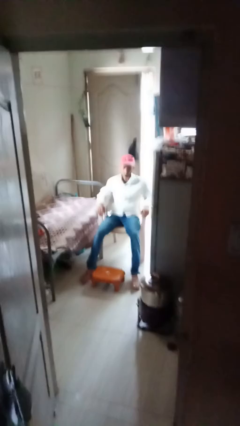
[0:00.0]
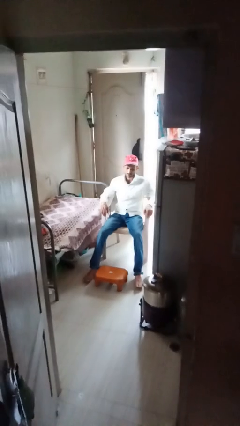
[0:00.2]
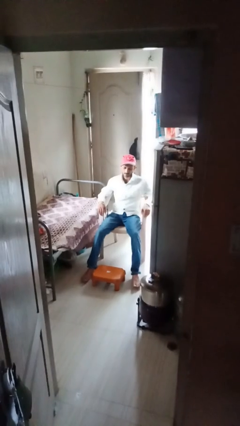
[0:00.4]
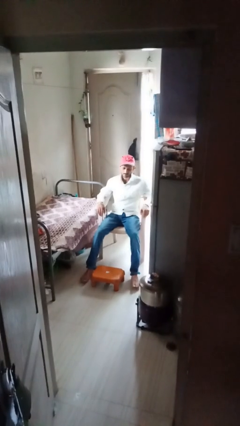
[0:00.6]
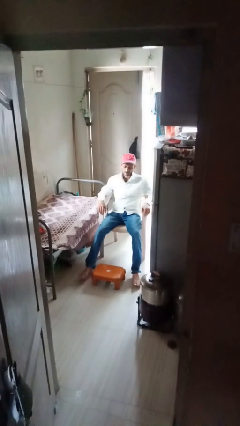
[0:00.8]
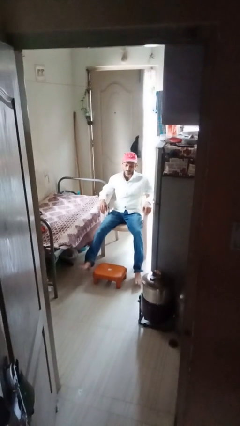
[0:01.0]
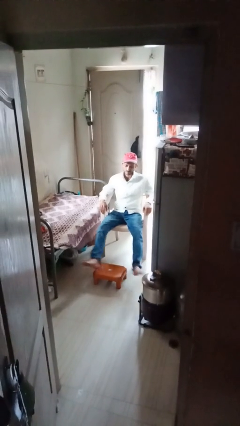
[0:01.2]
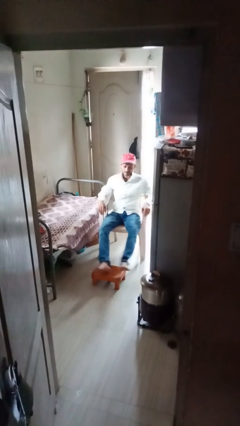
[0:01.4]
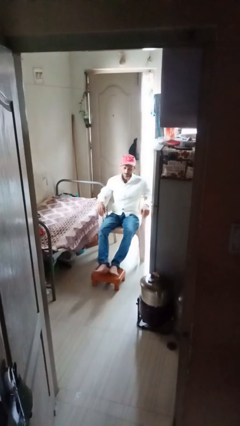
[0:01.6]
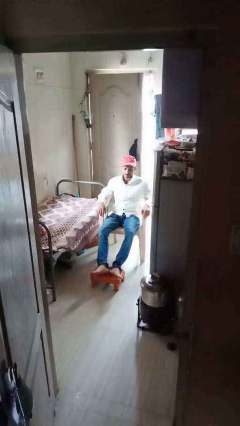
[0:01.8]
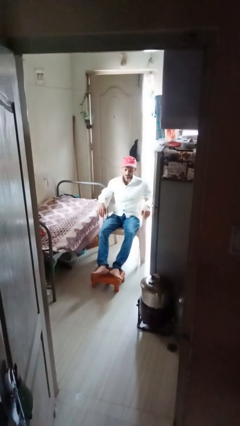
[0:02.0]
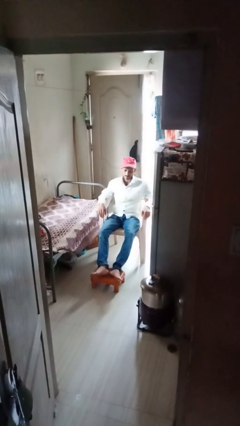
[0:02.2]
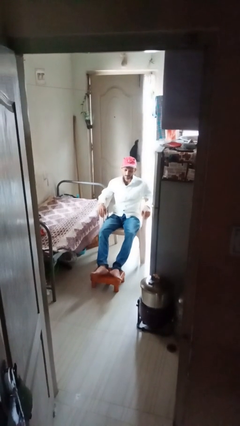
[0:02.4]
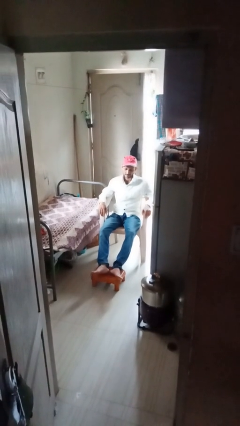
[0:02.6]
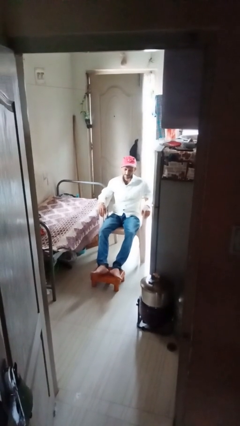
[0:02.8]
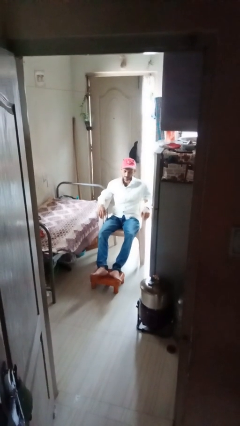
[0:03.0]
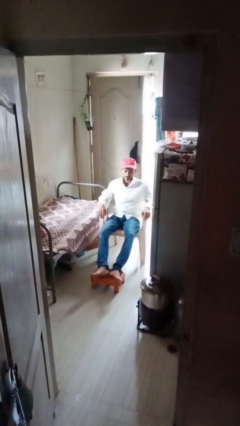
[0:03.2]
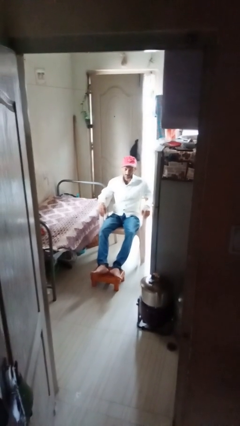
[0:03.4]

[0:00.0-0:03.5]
person puts feet up

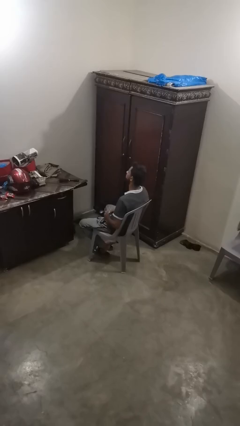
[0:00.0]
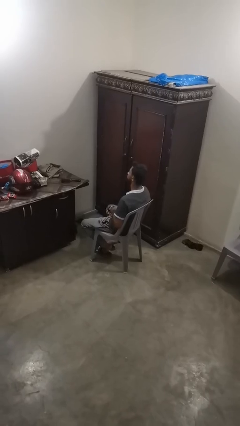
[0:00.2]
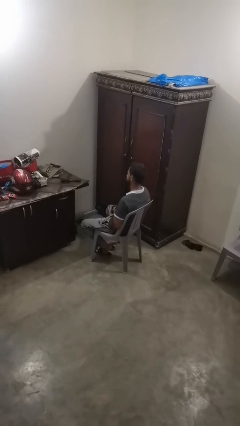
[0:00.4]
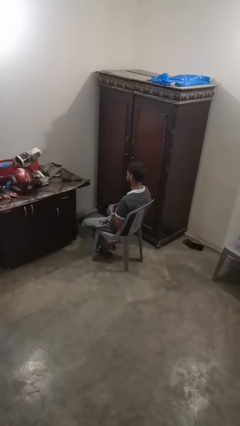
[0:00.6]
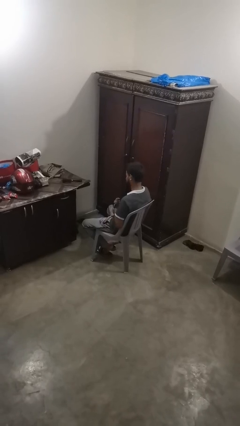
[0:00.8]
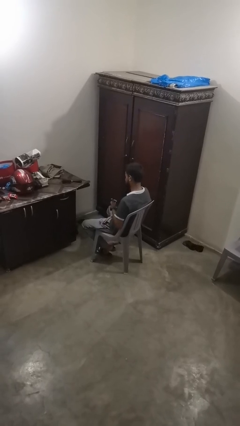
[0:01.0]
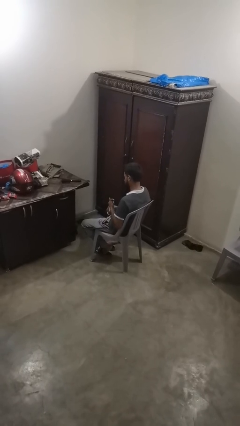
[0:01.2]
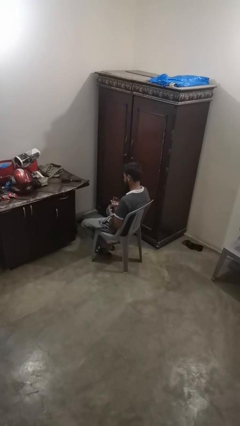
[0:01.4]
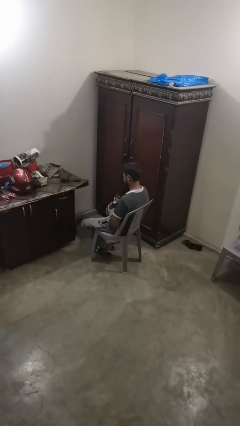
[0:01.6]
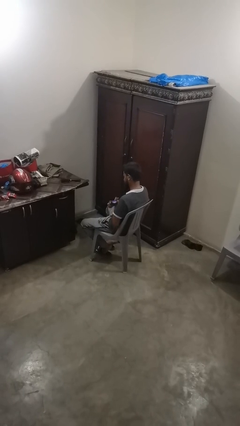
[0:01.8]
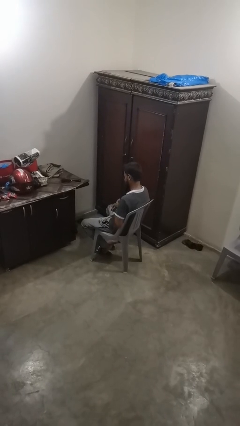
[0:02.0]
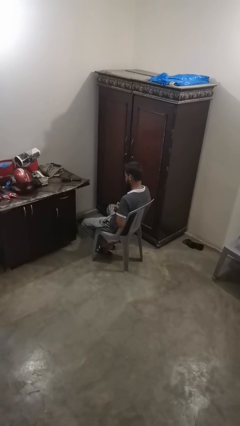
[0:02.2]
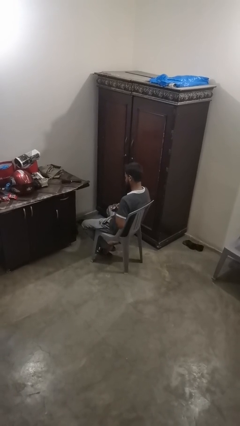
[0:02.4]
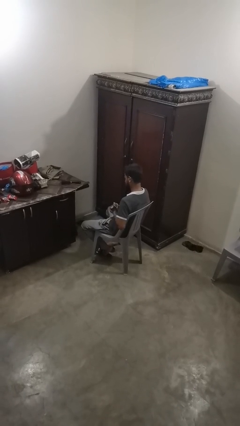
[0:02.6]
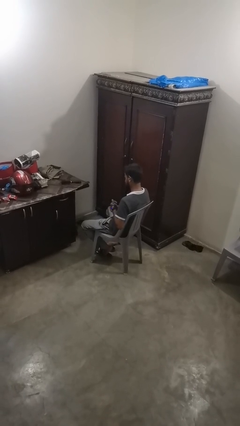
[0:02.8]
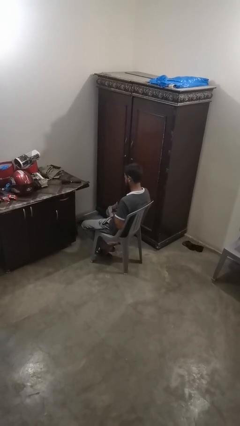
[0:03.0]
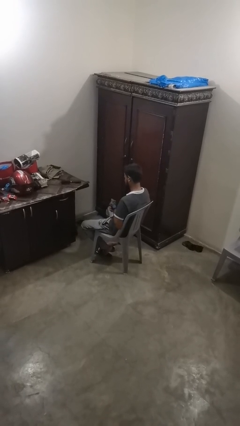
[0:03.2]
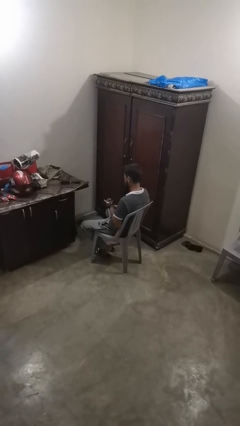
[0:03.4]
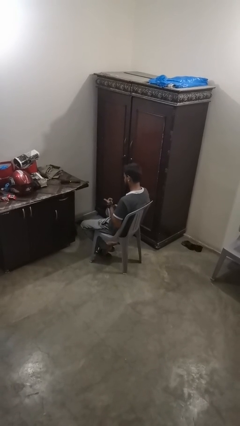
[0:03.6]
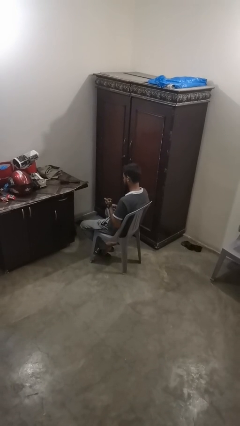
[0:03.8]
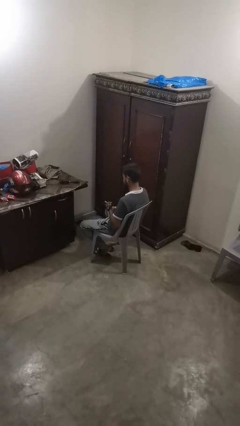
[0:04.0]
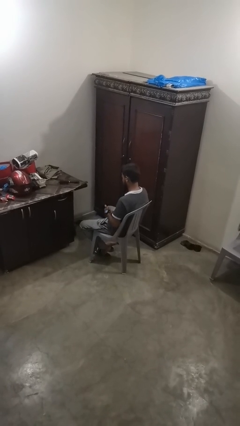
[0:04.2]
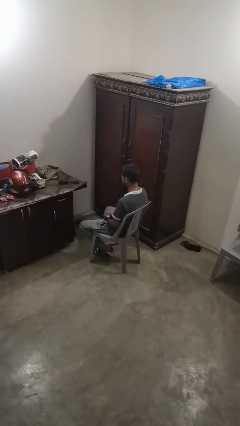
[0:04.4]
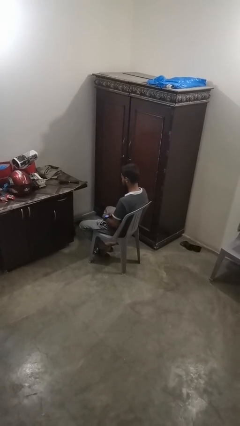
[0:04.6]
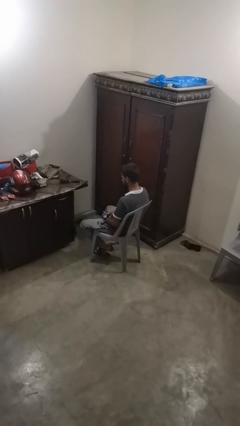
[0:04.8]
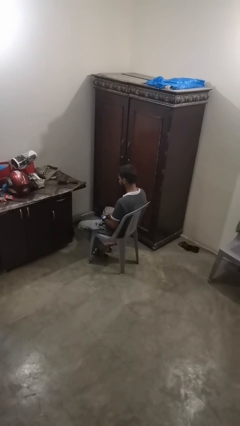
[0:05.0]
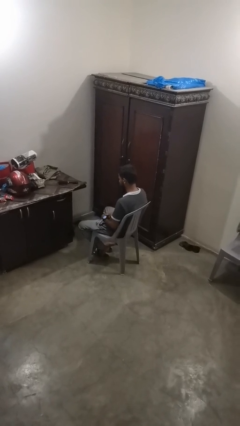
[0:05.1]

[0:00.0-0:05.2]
person puts on wristwatch

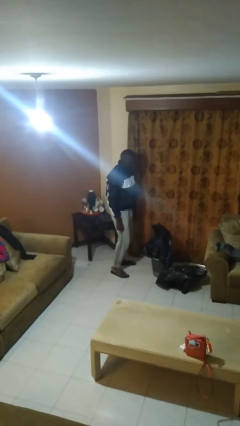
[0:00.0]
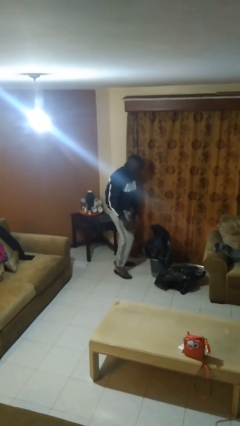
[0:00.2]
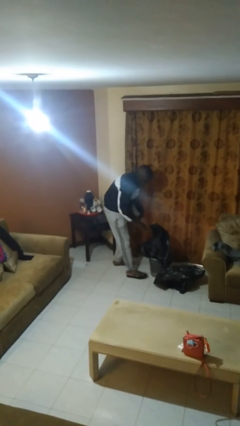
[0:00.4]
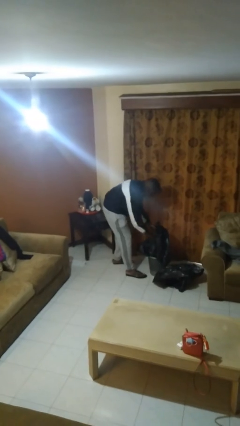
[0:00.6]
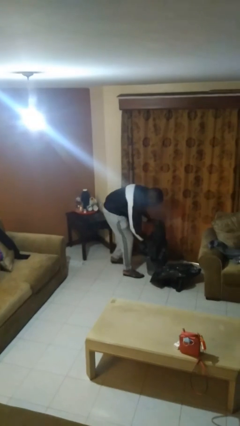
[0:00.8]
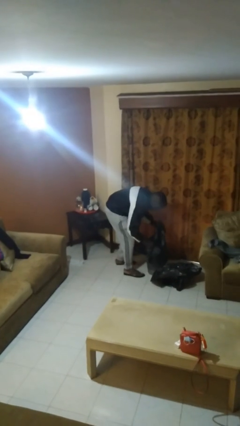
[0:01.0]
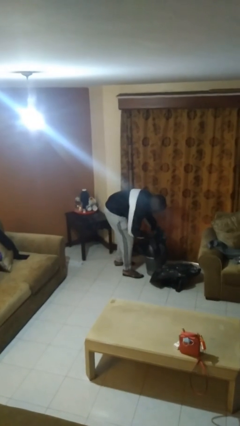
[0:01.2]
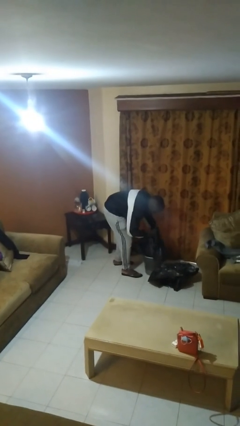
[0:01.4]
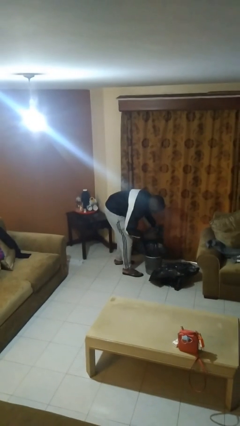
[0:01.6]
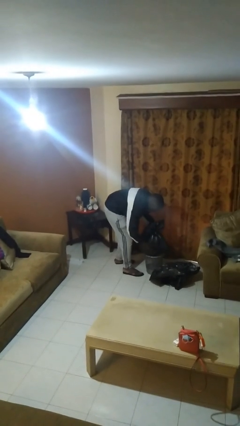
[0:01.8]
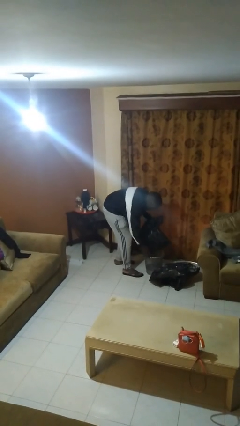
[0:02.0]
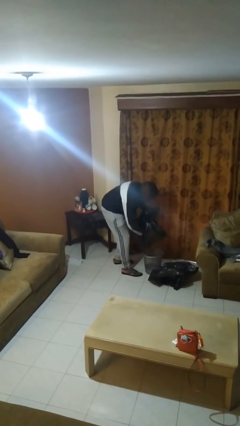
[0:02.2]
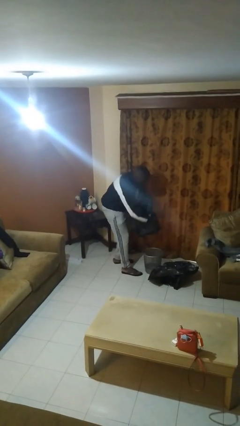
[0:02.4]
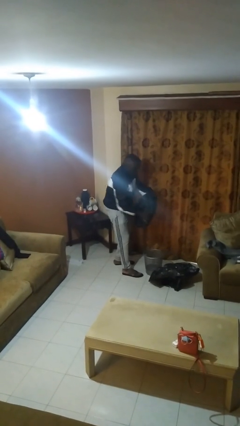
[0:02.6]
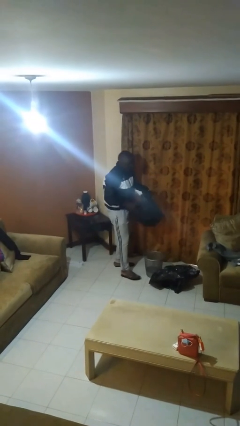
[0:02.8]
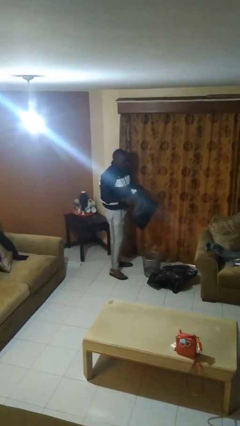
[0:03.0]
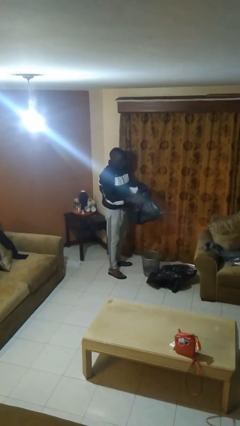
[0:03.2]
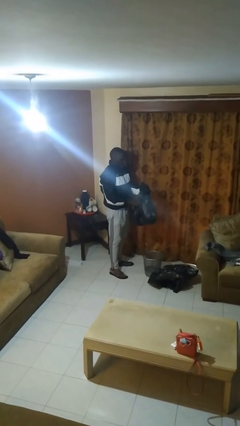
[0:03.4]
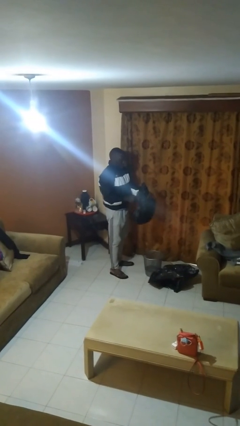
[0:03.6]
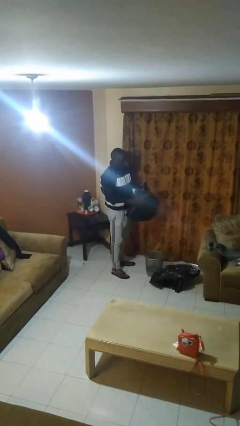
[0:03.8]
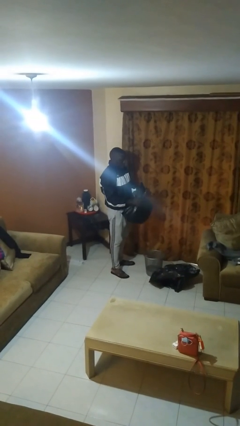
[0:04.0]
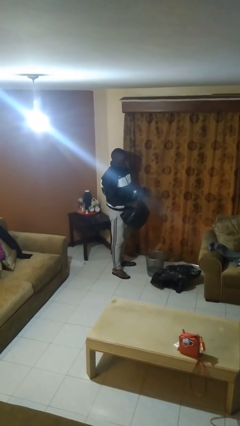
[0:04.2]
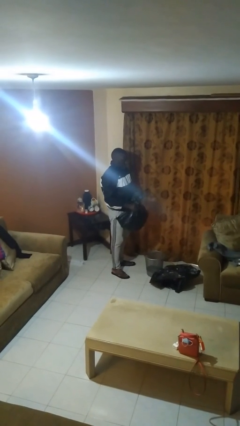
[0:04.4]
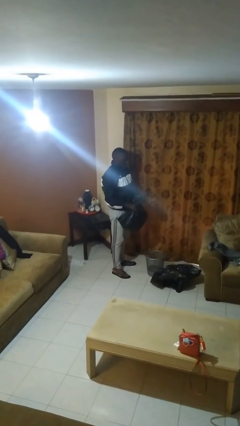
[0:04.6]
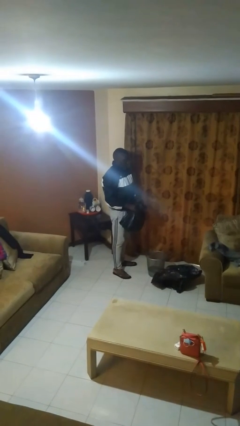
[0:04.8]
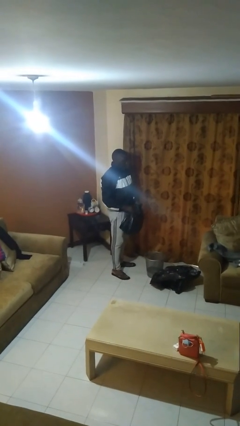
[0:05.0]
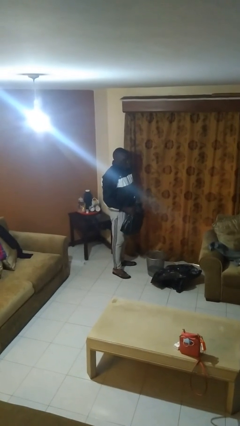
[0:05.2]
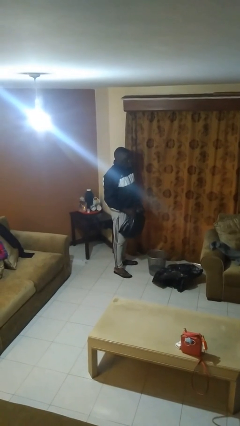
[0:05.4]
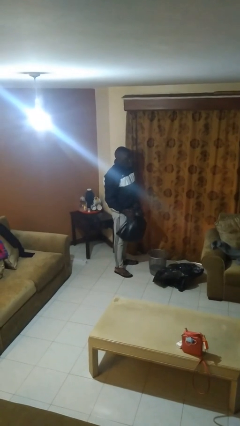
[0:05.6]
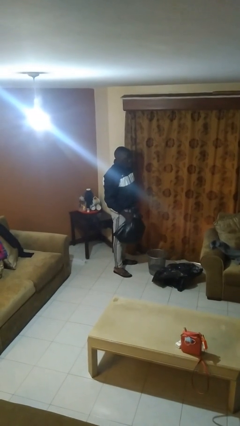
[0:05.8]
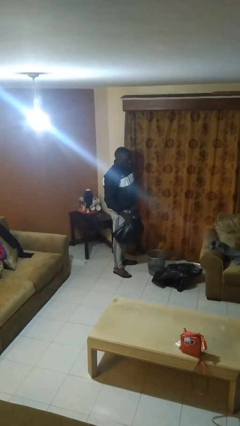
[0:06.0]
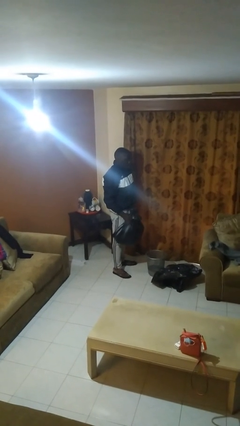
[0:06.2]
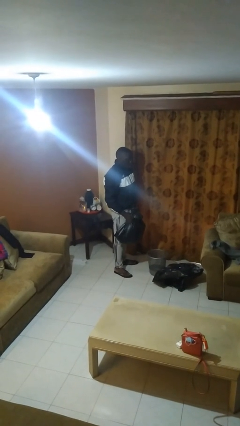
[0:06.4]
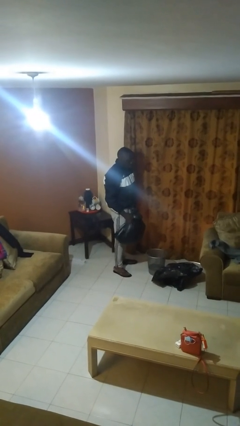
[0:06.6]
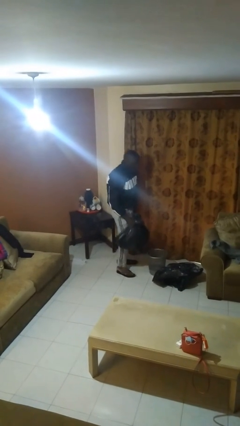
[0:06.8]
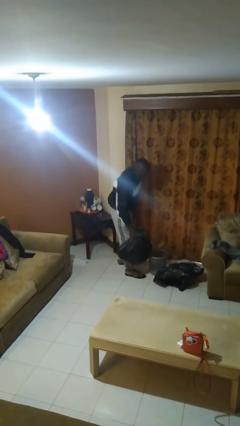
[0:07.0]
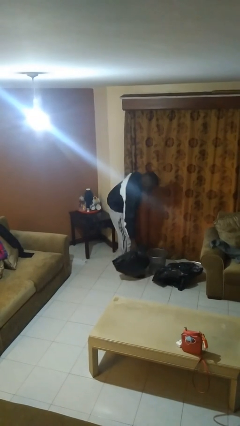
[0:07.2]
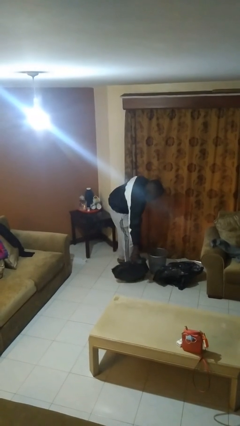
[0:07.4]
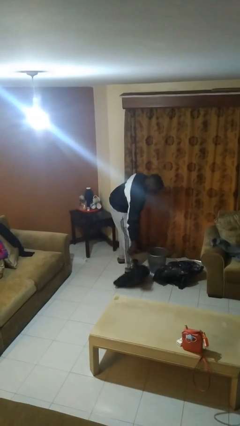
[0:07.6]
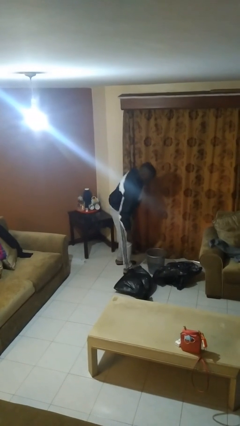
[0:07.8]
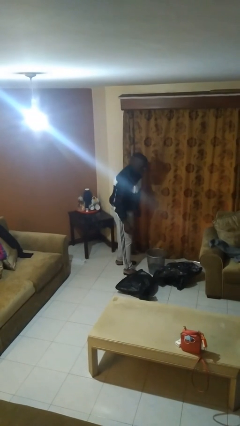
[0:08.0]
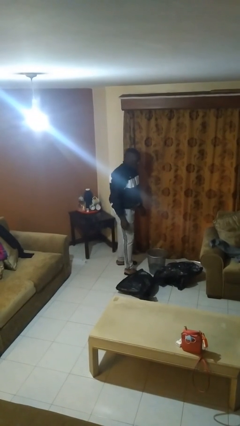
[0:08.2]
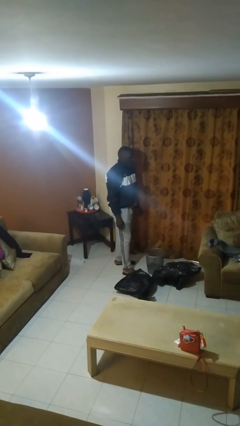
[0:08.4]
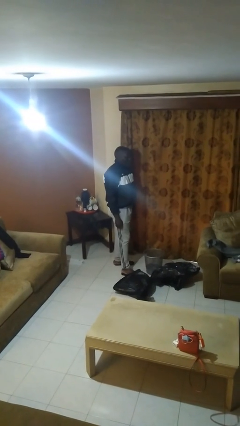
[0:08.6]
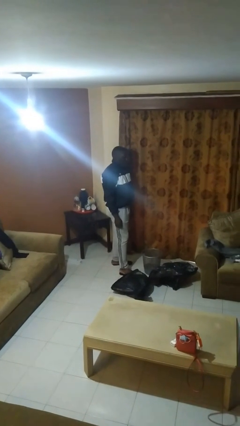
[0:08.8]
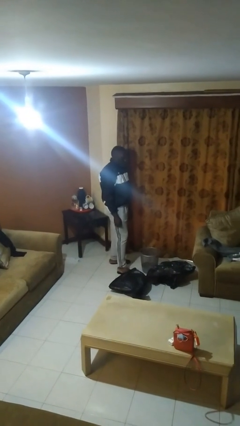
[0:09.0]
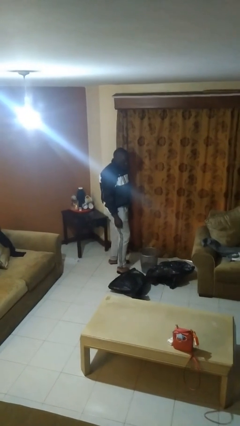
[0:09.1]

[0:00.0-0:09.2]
person removes trashbag from trashcan

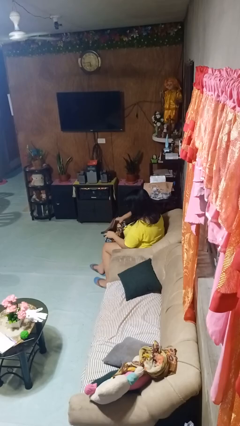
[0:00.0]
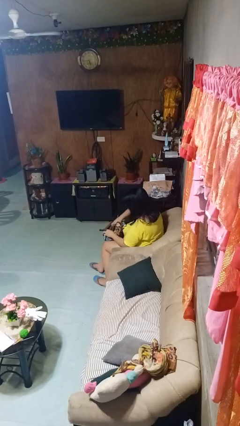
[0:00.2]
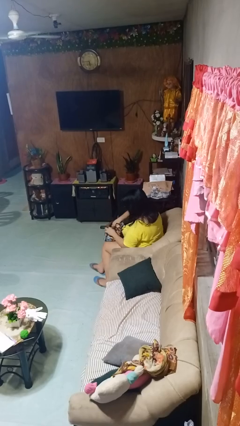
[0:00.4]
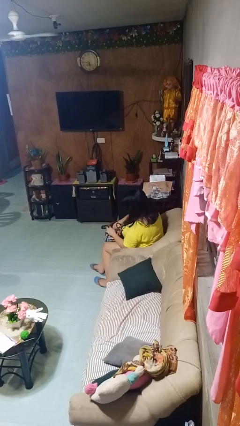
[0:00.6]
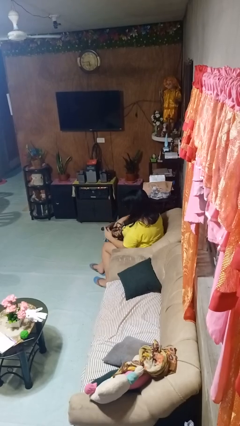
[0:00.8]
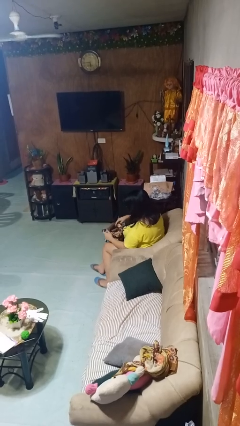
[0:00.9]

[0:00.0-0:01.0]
person puts object into backpack
